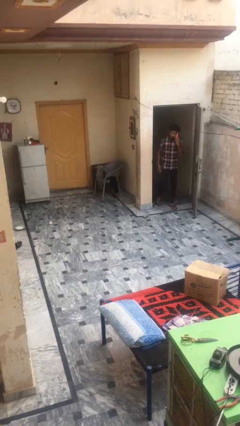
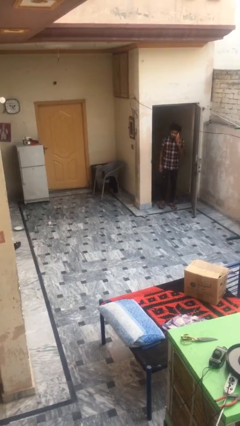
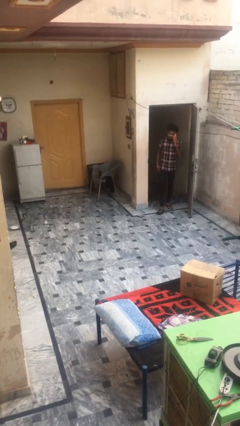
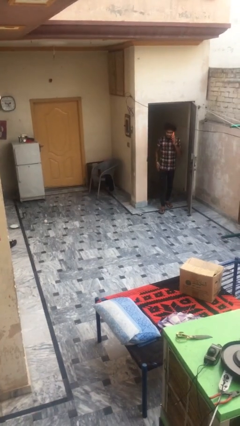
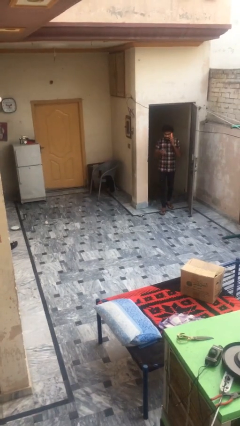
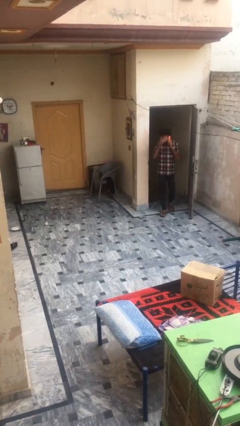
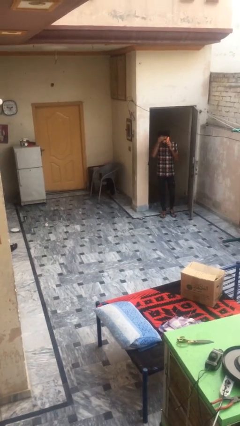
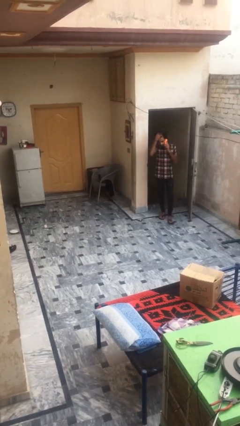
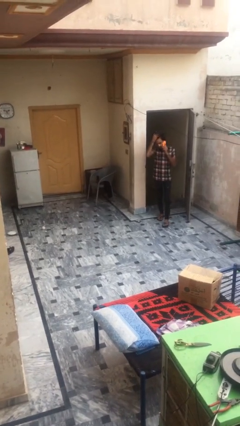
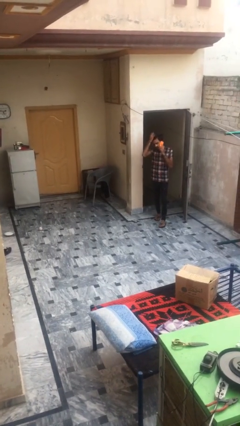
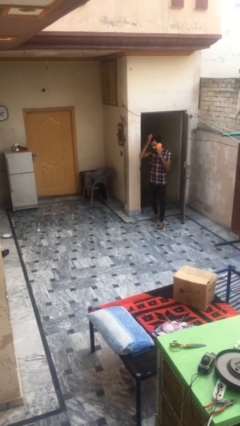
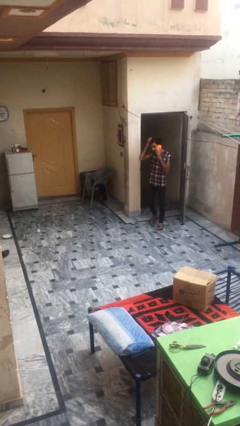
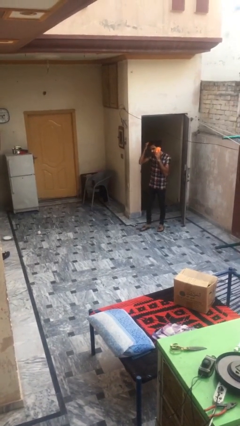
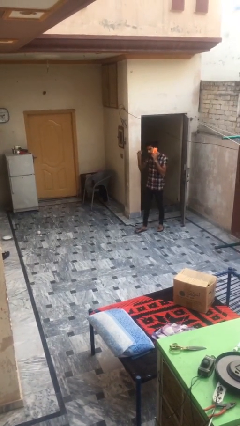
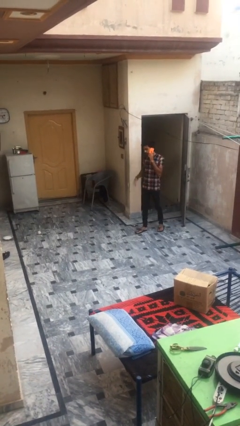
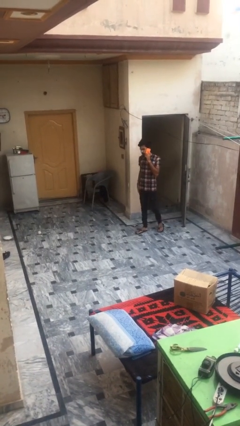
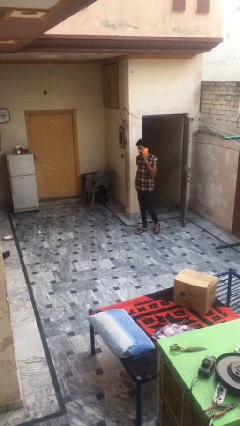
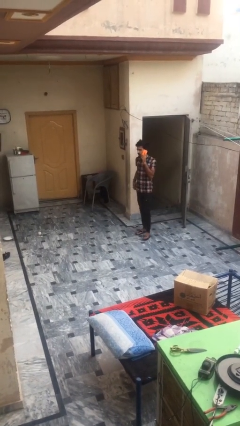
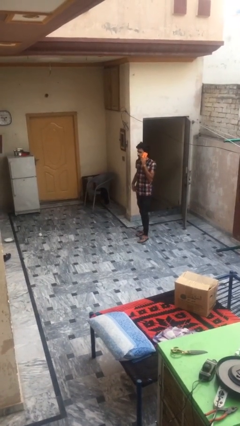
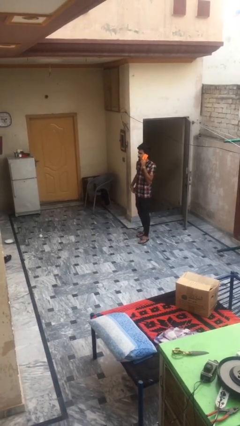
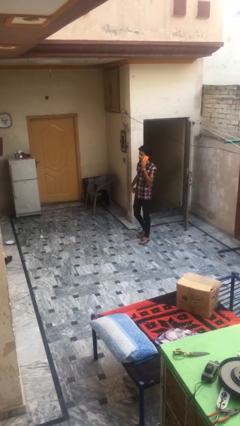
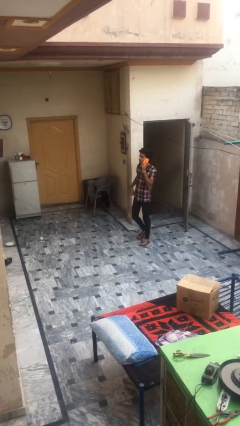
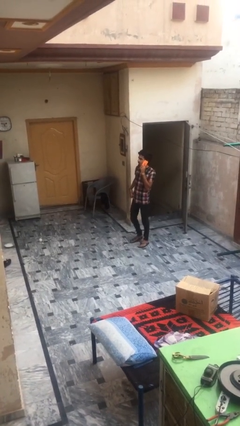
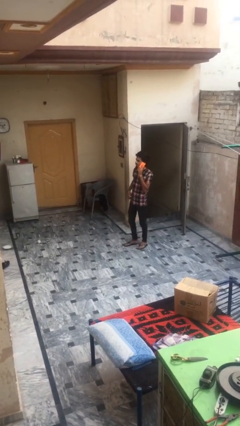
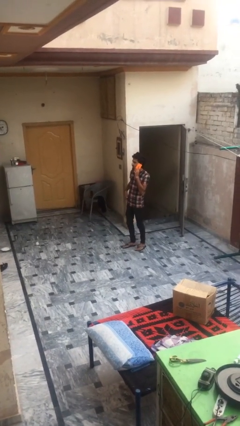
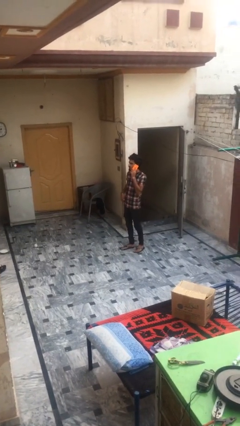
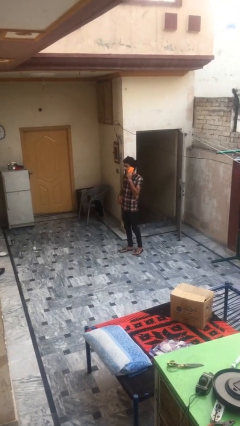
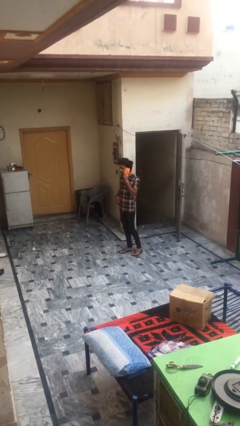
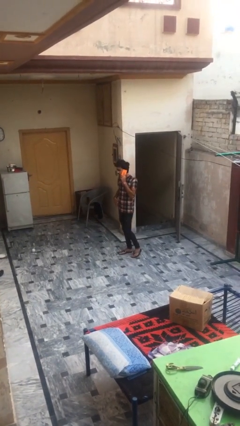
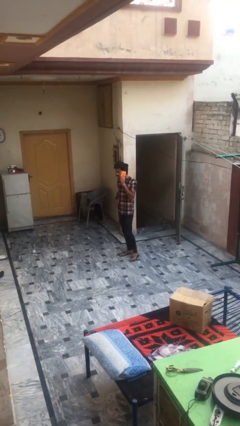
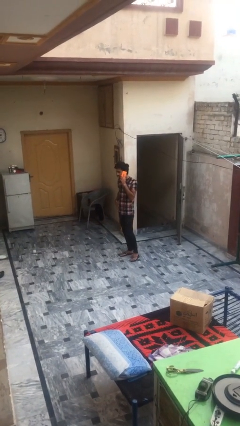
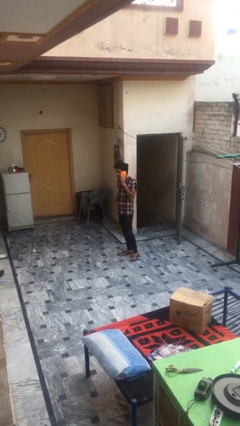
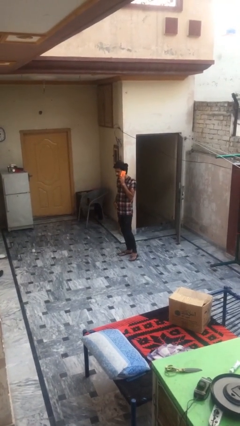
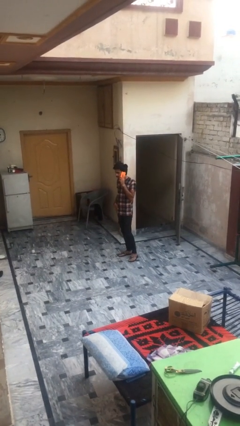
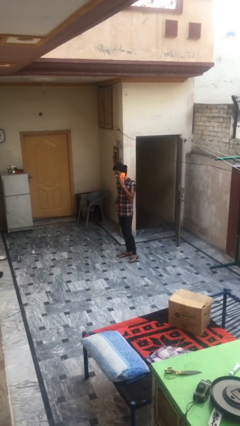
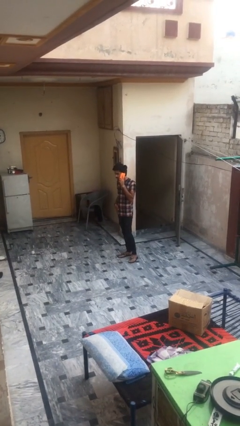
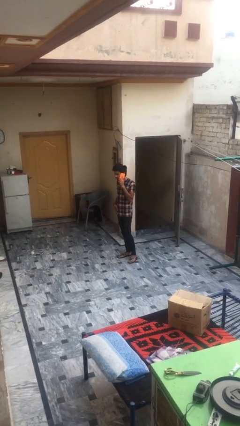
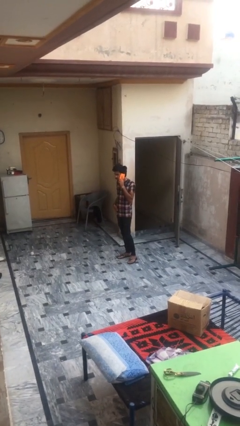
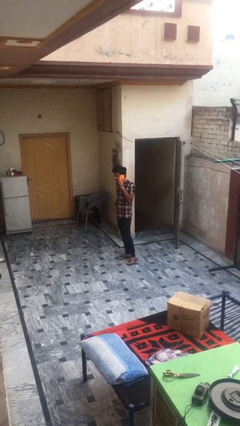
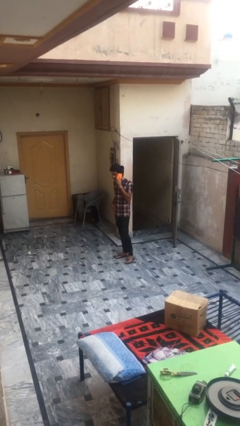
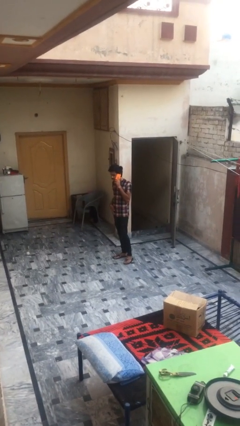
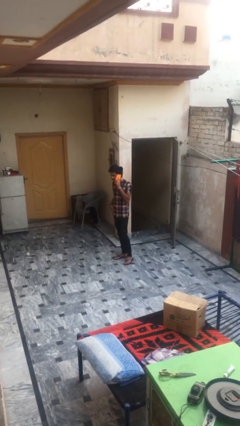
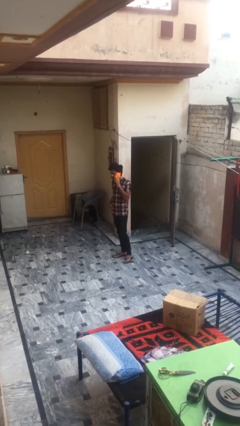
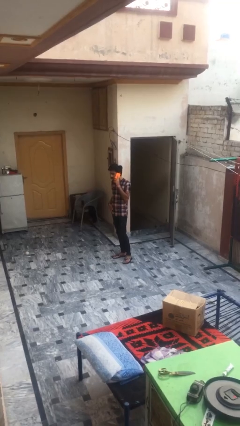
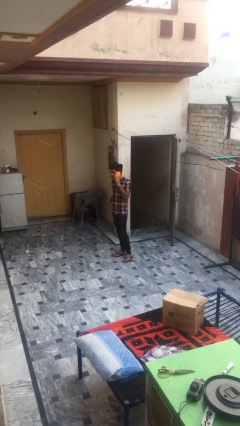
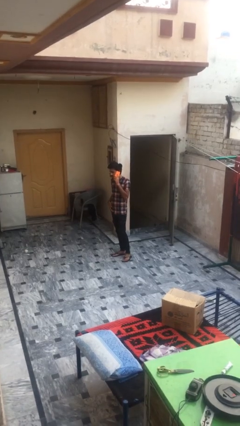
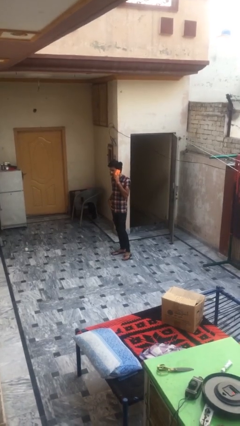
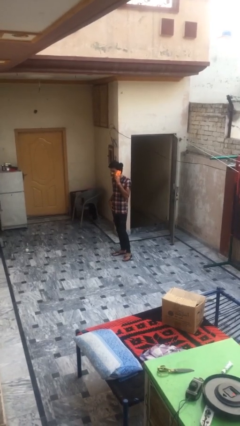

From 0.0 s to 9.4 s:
person enters scene through structure

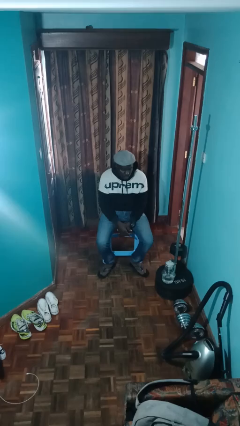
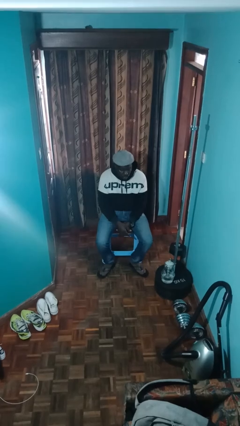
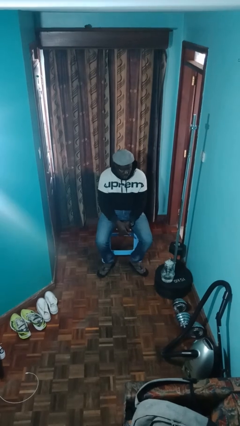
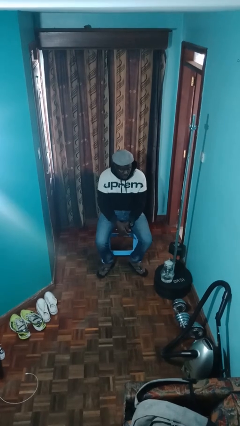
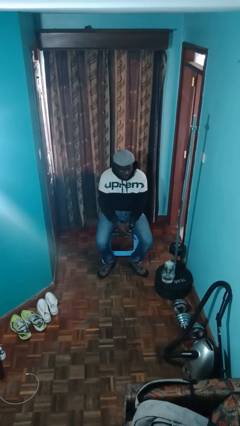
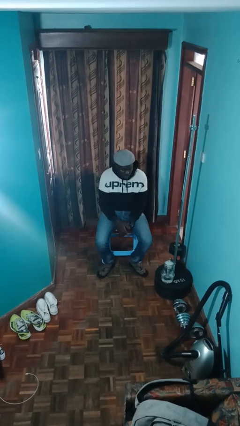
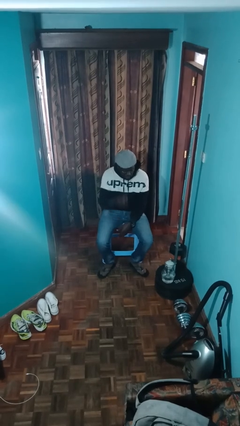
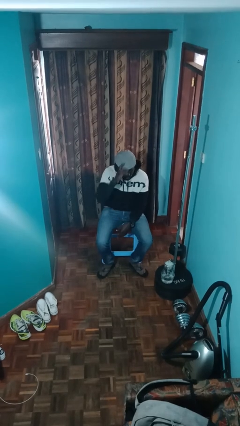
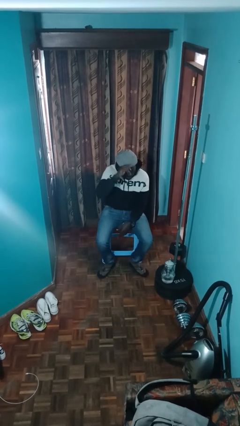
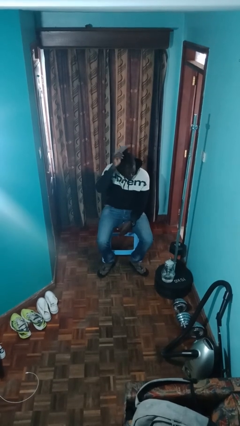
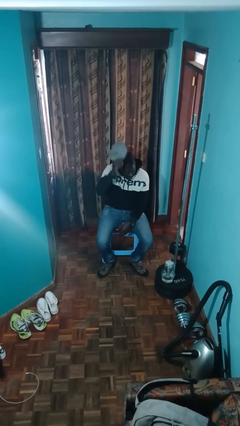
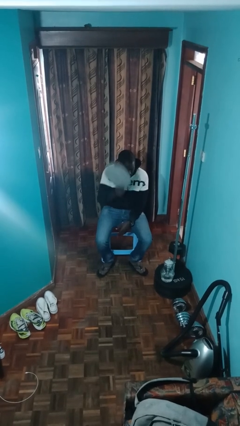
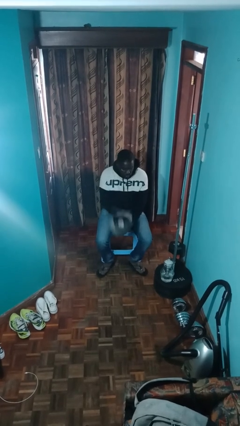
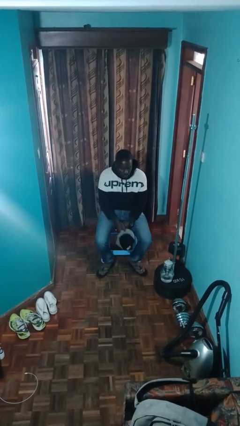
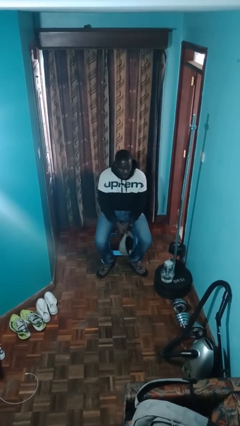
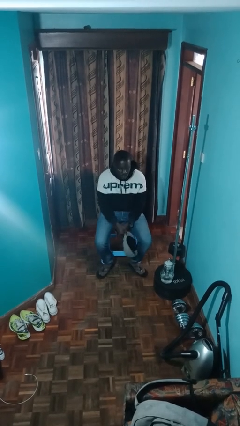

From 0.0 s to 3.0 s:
person takes off hat

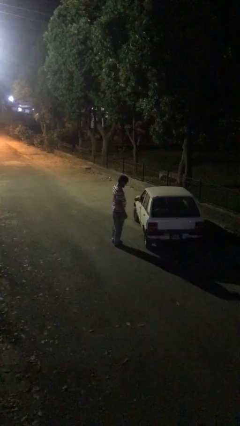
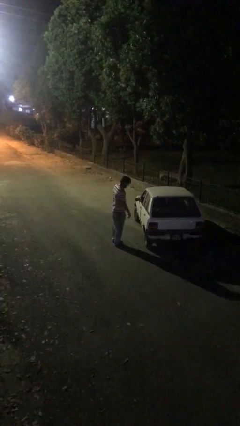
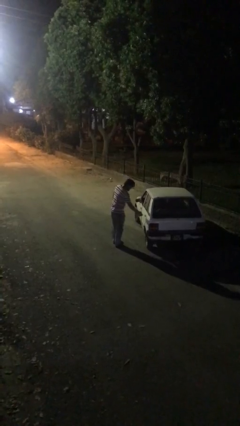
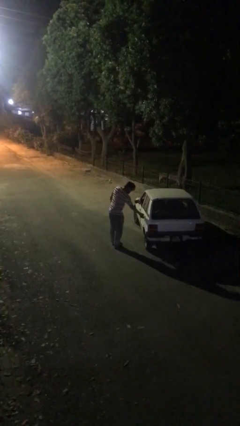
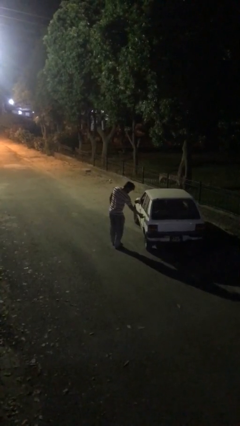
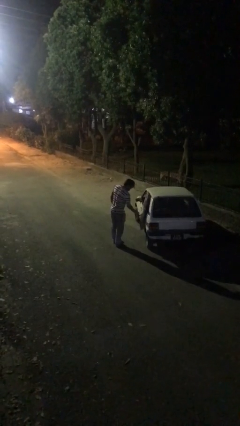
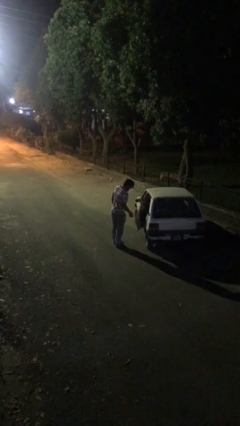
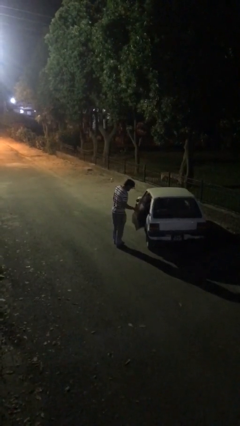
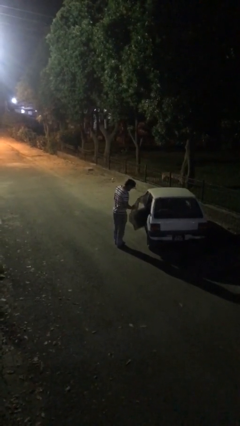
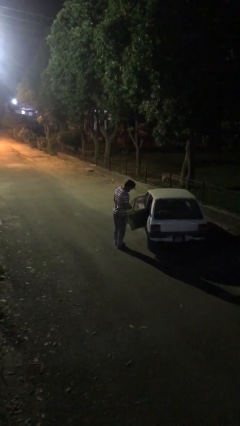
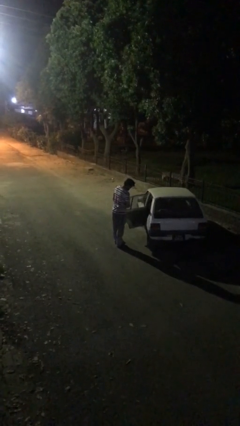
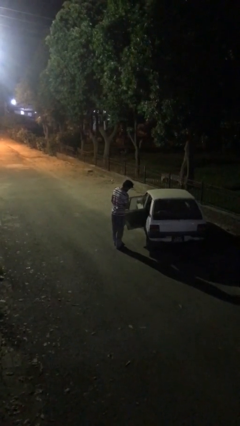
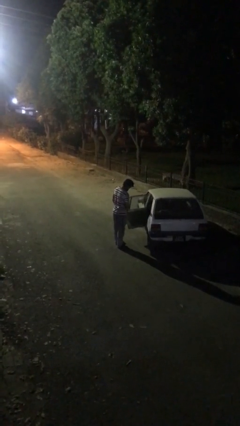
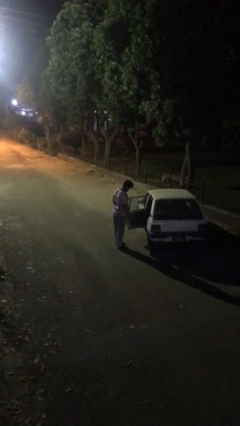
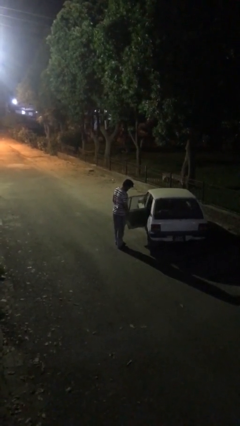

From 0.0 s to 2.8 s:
person opens car door

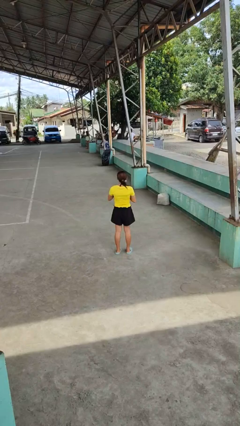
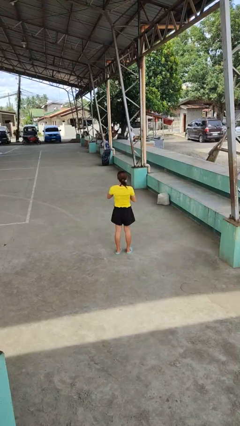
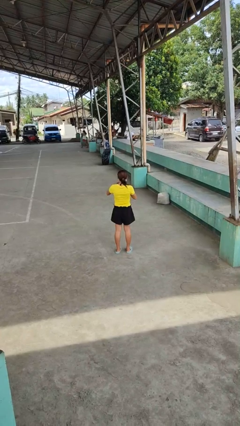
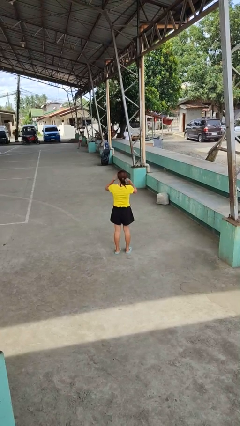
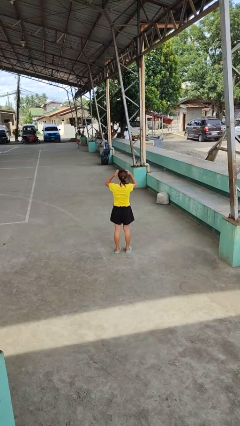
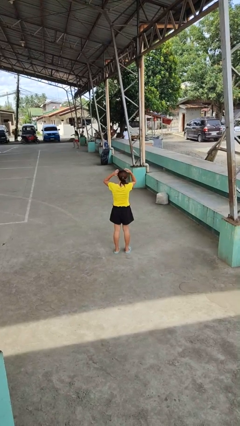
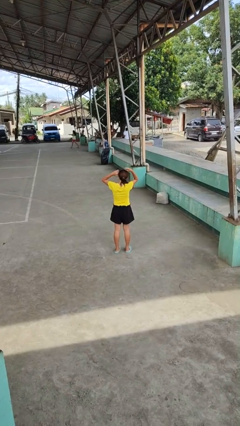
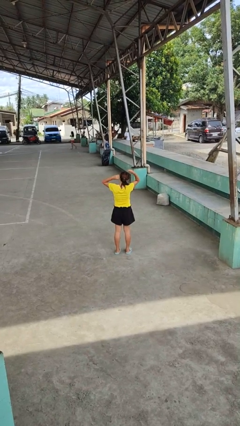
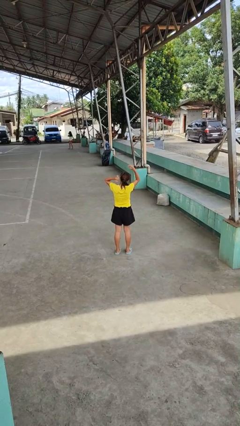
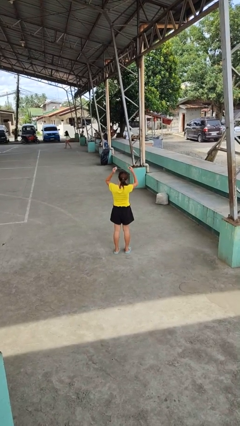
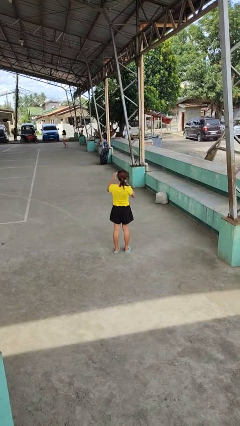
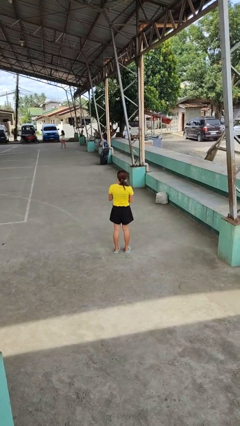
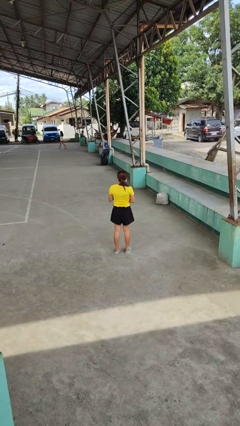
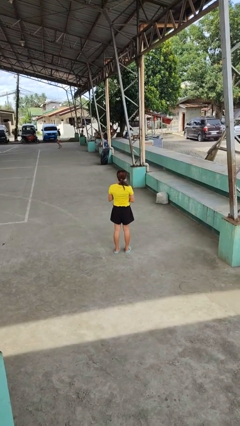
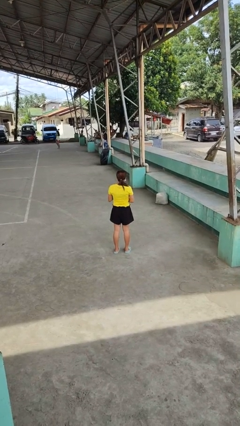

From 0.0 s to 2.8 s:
person takes off necklace
